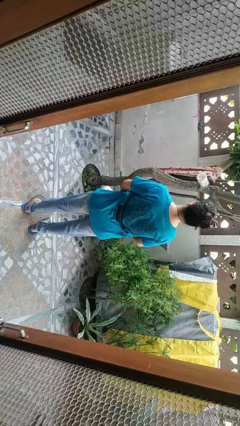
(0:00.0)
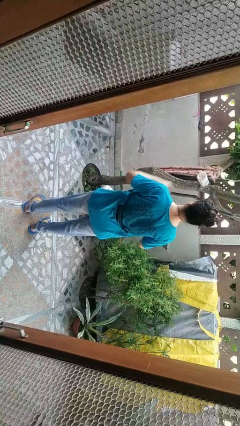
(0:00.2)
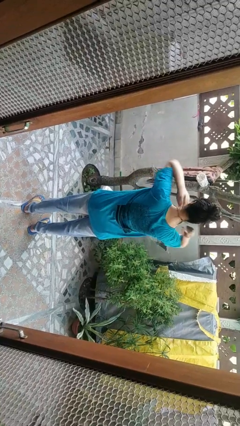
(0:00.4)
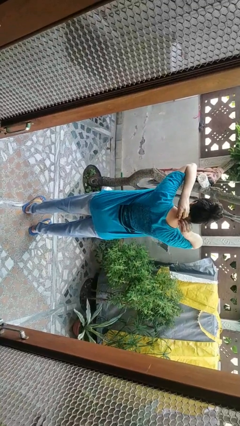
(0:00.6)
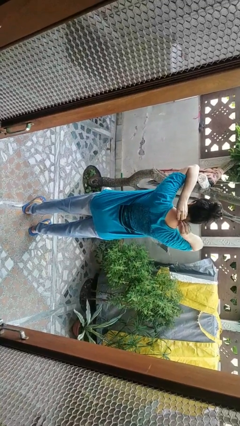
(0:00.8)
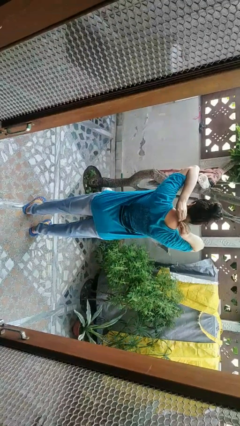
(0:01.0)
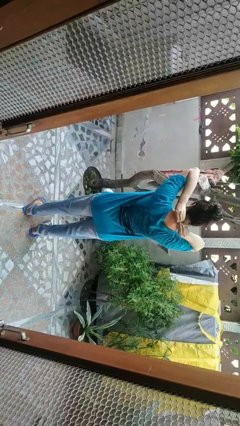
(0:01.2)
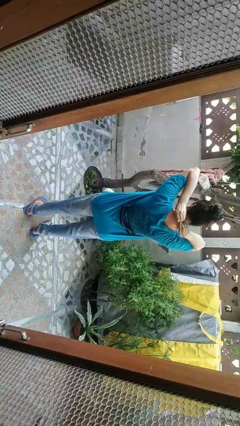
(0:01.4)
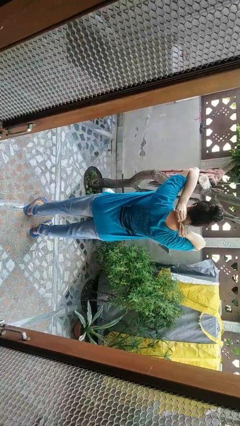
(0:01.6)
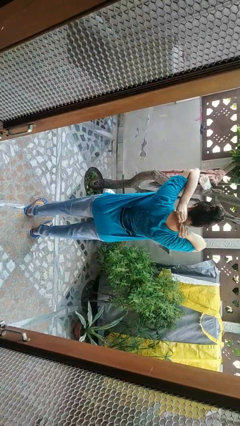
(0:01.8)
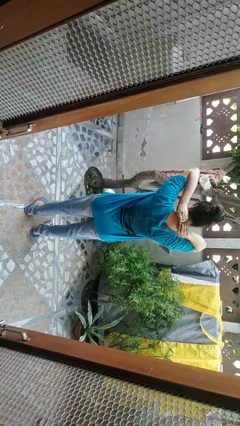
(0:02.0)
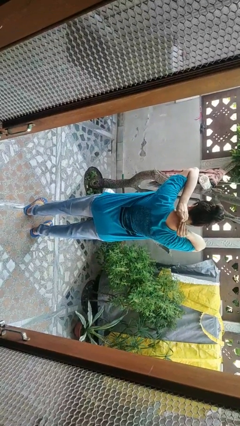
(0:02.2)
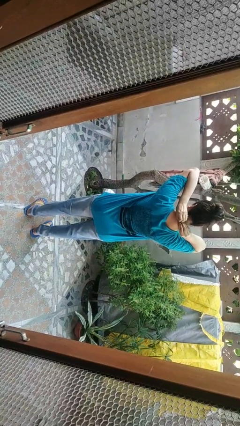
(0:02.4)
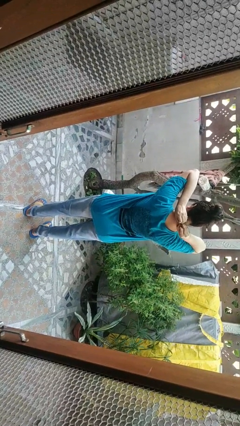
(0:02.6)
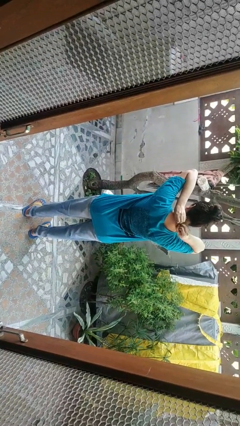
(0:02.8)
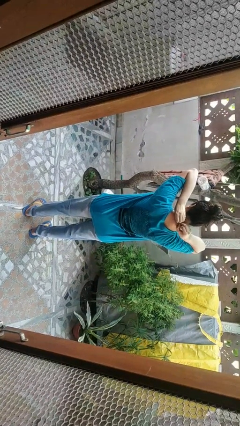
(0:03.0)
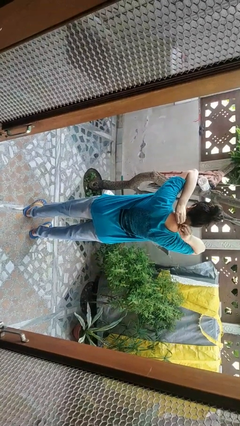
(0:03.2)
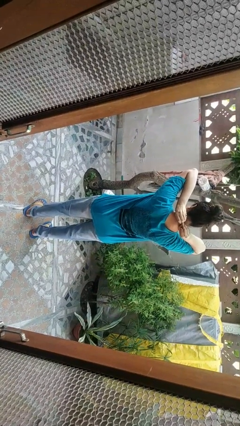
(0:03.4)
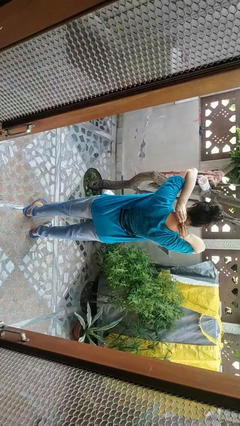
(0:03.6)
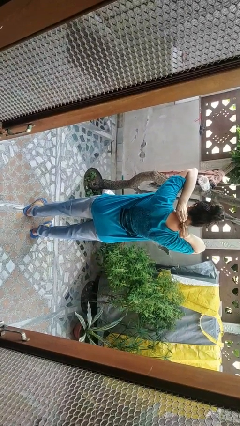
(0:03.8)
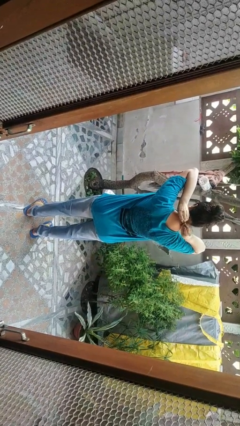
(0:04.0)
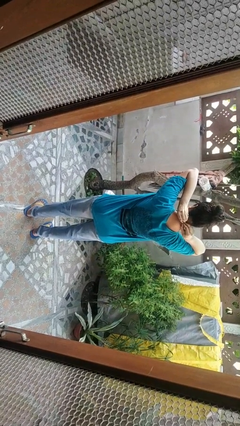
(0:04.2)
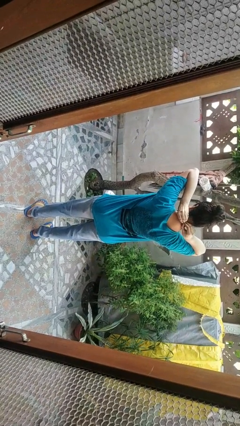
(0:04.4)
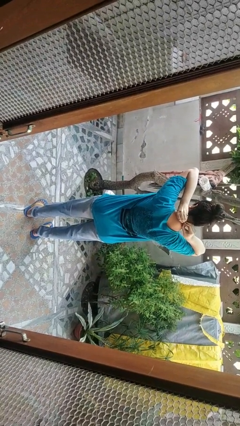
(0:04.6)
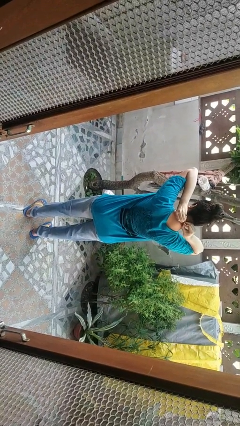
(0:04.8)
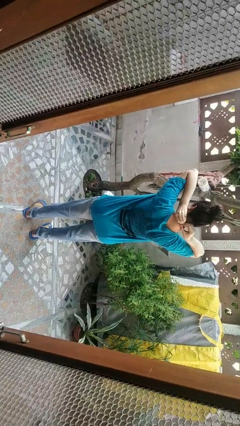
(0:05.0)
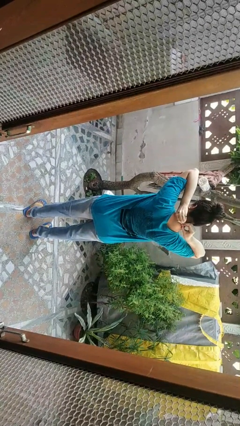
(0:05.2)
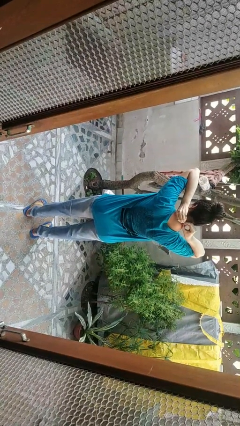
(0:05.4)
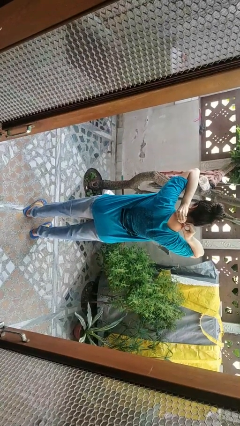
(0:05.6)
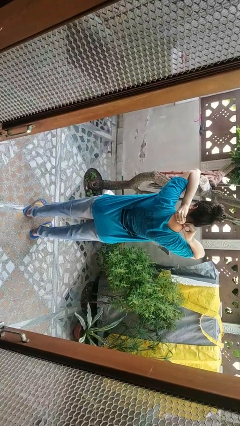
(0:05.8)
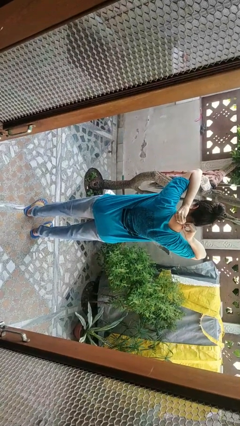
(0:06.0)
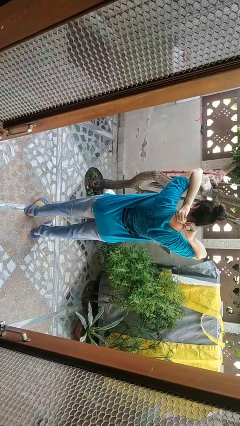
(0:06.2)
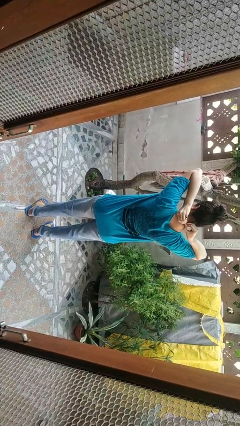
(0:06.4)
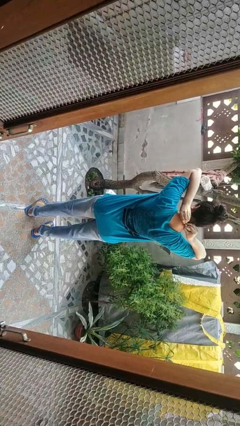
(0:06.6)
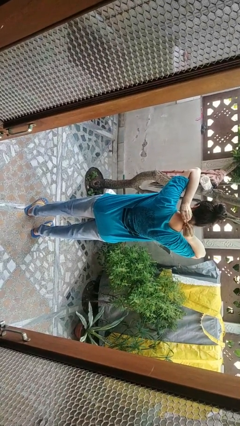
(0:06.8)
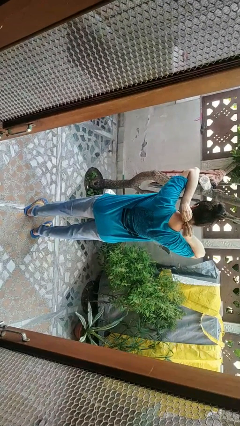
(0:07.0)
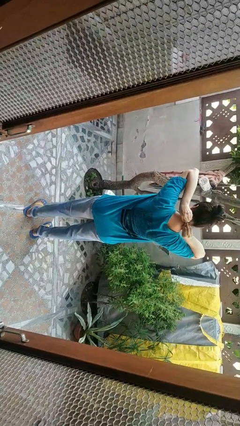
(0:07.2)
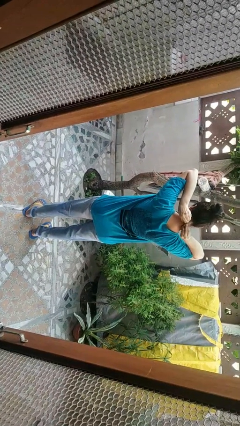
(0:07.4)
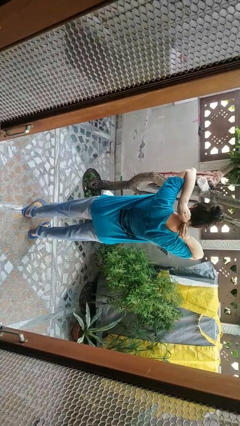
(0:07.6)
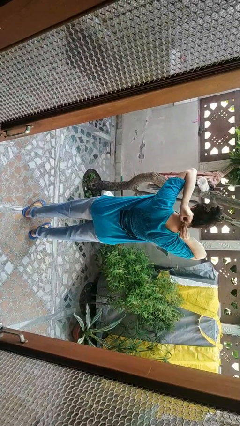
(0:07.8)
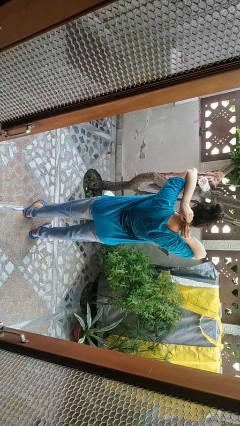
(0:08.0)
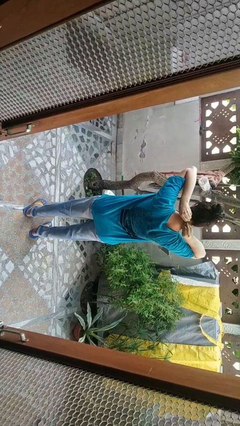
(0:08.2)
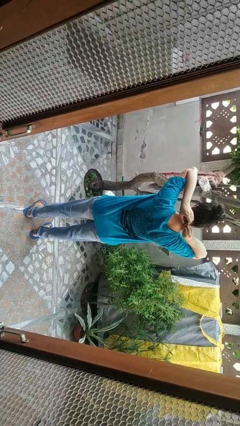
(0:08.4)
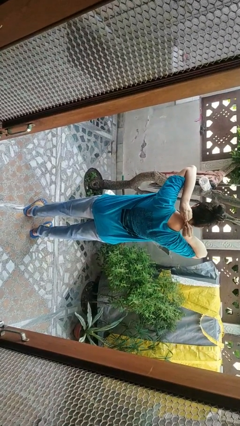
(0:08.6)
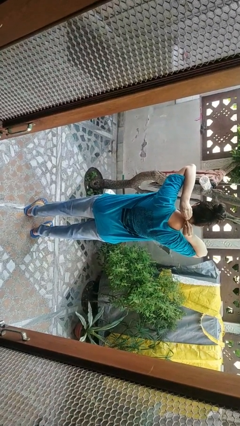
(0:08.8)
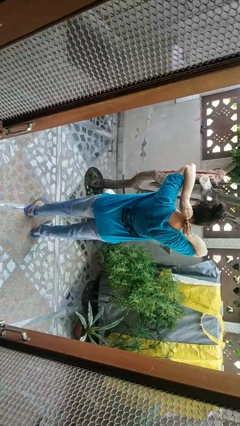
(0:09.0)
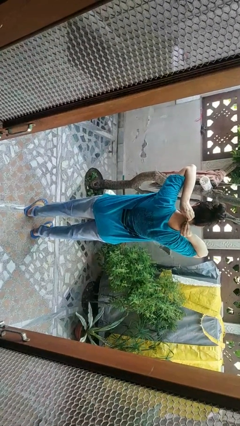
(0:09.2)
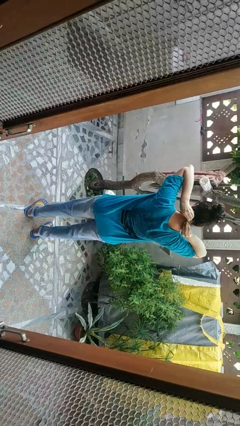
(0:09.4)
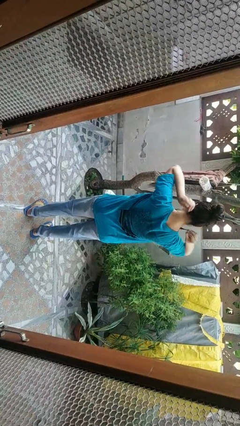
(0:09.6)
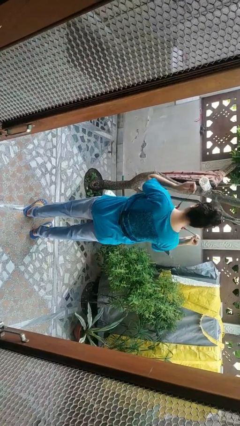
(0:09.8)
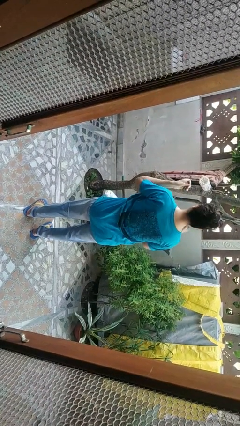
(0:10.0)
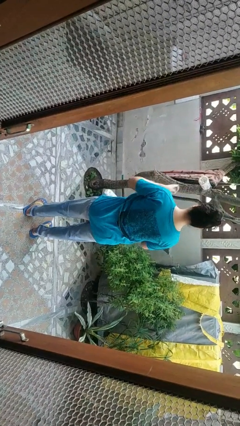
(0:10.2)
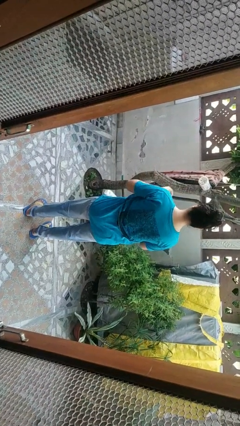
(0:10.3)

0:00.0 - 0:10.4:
person takes off necklace

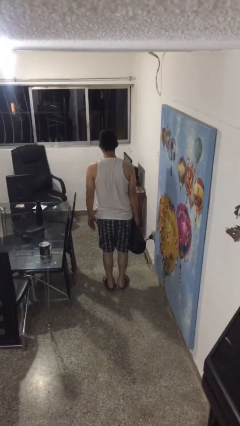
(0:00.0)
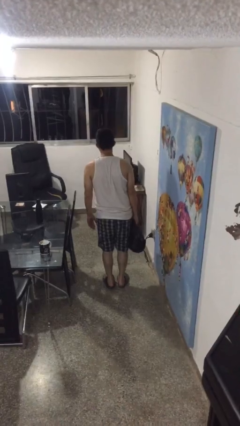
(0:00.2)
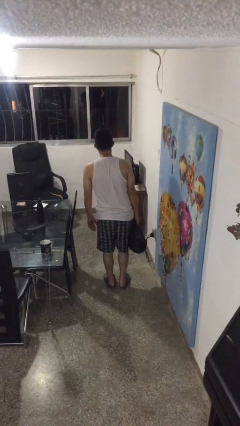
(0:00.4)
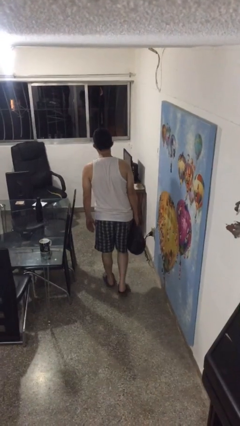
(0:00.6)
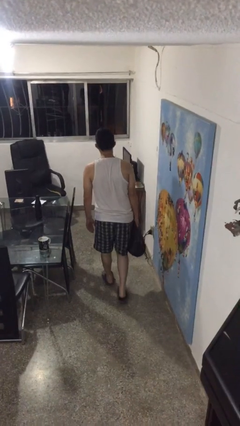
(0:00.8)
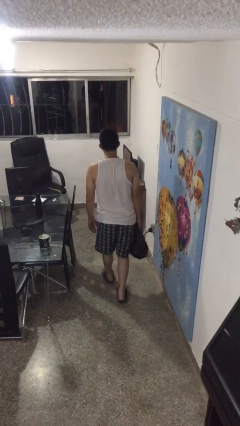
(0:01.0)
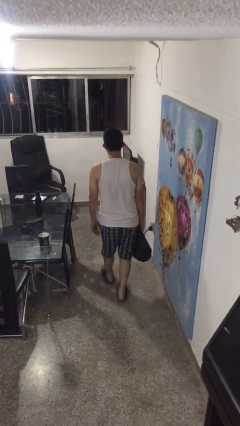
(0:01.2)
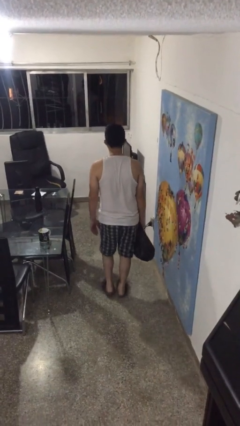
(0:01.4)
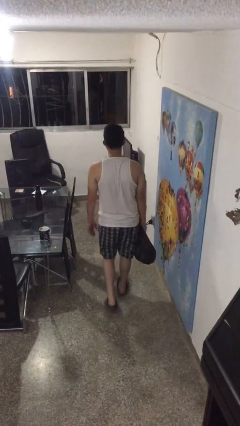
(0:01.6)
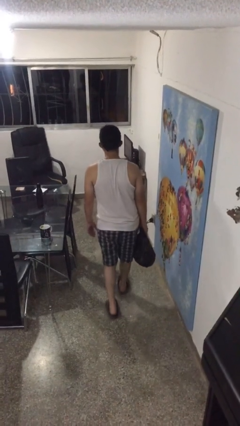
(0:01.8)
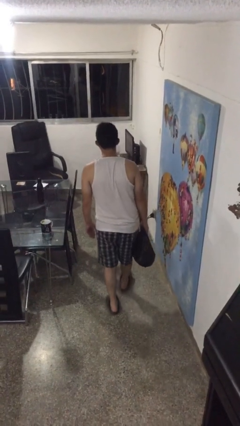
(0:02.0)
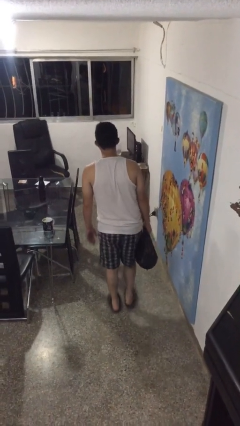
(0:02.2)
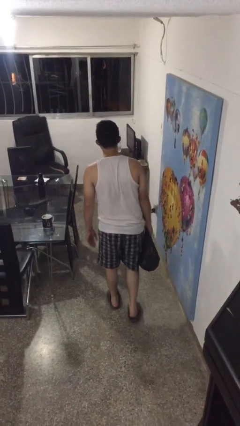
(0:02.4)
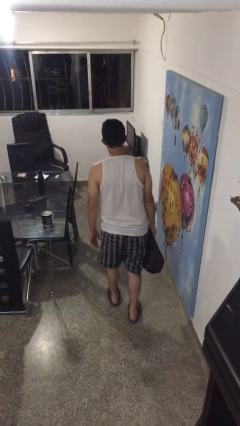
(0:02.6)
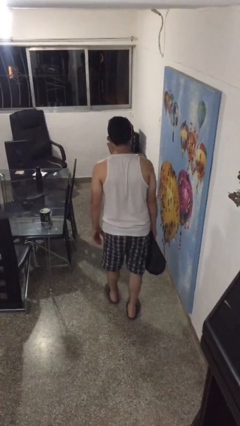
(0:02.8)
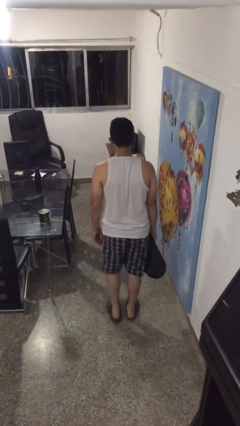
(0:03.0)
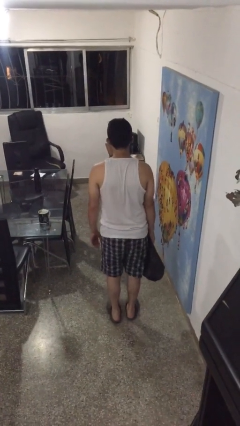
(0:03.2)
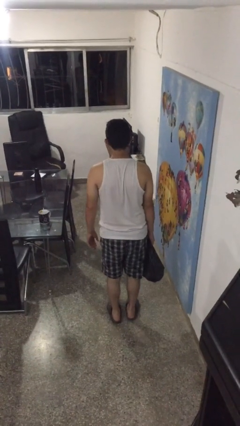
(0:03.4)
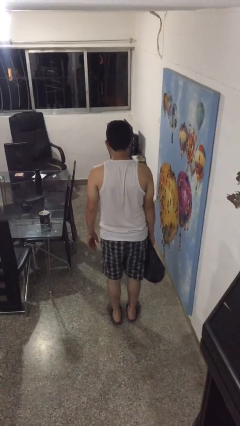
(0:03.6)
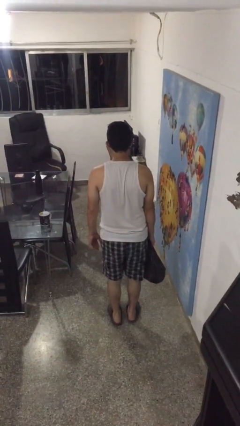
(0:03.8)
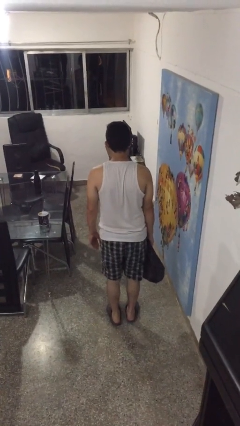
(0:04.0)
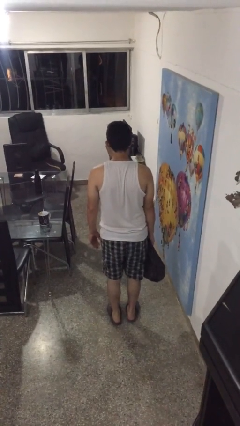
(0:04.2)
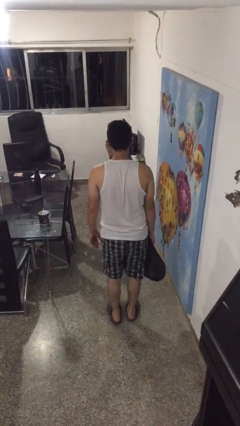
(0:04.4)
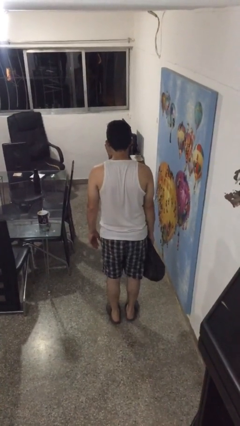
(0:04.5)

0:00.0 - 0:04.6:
person carries groceries

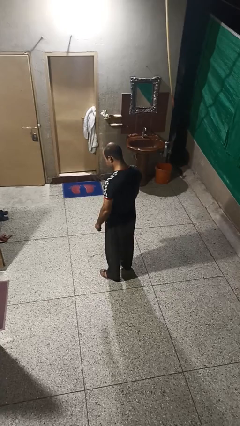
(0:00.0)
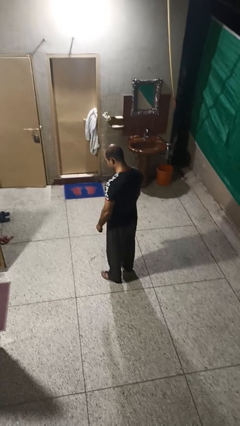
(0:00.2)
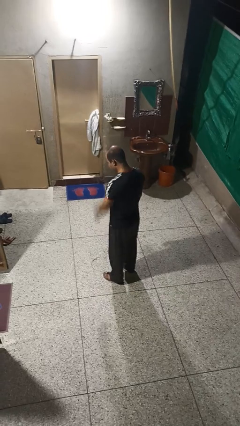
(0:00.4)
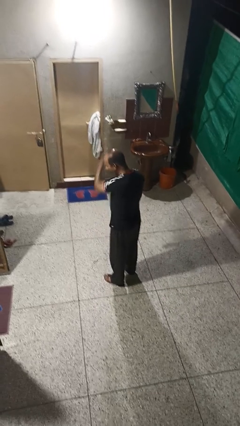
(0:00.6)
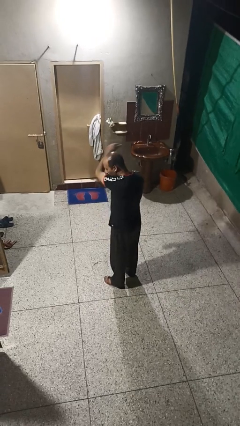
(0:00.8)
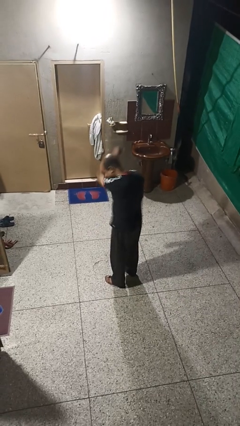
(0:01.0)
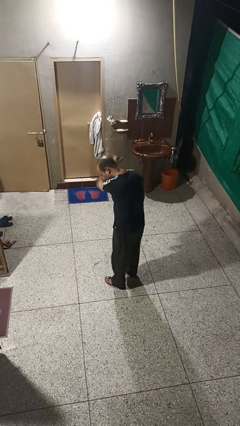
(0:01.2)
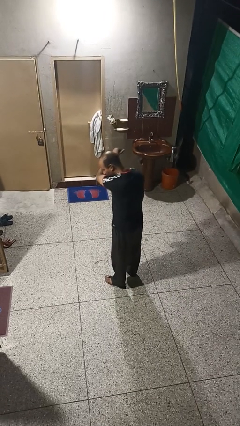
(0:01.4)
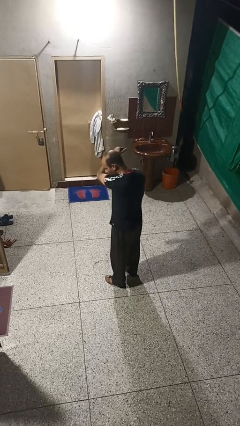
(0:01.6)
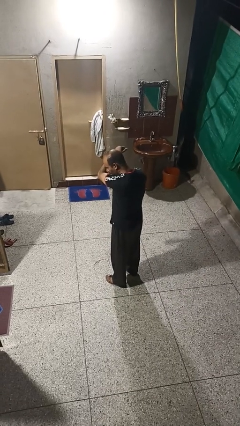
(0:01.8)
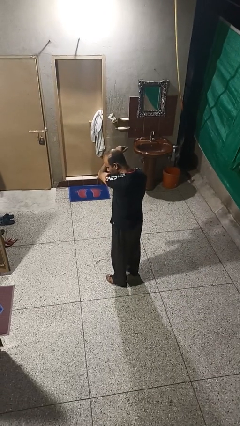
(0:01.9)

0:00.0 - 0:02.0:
person sneezes into arm

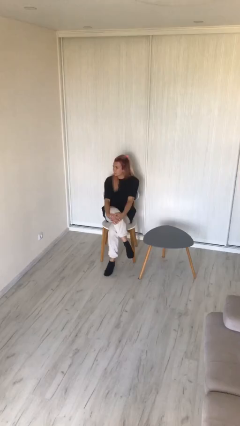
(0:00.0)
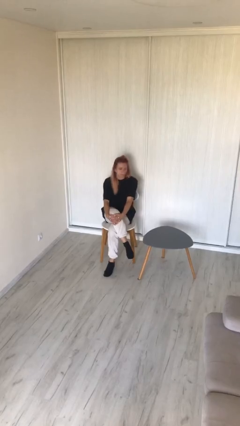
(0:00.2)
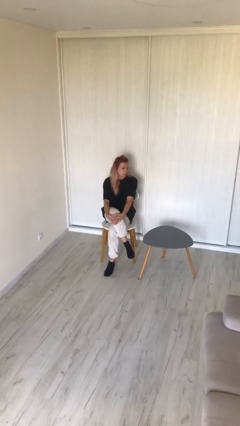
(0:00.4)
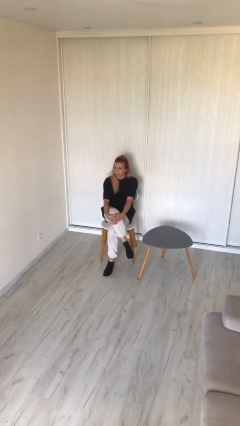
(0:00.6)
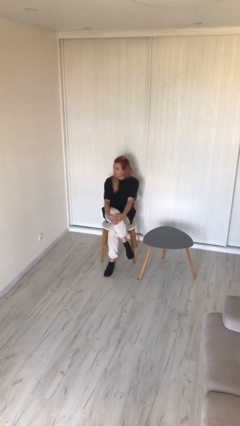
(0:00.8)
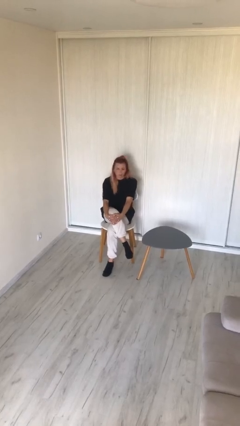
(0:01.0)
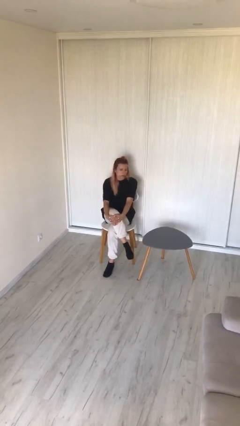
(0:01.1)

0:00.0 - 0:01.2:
person shakes head
